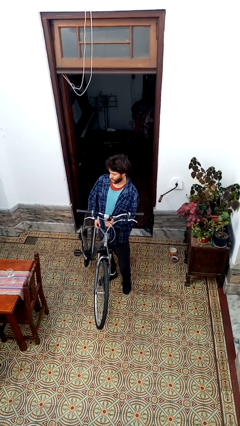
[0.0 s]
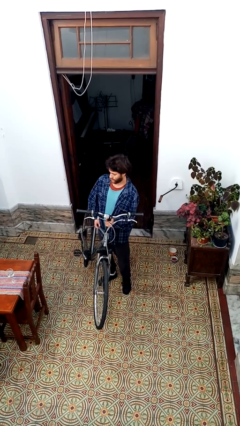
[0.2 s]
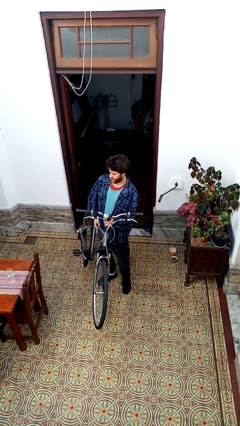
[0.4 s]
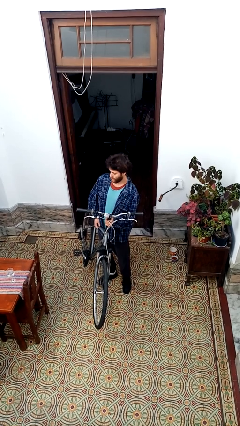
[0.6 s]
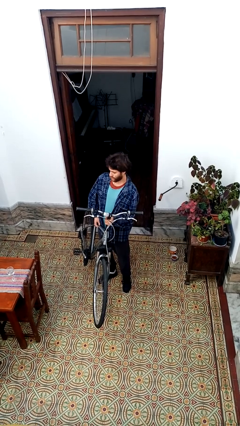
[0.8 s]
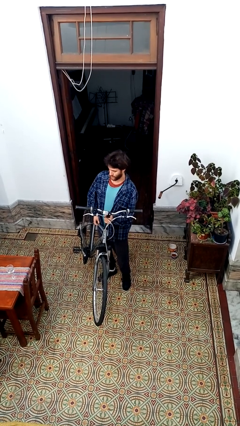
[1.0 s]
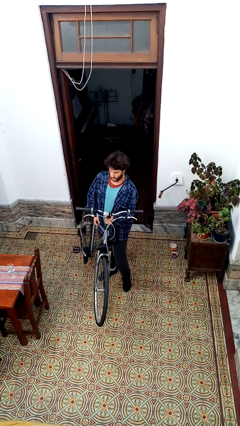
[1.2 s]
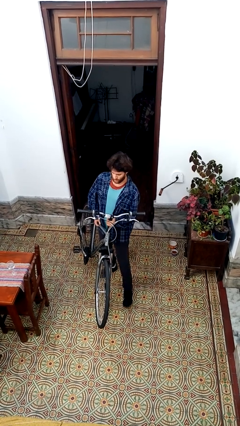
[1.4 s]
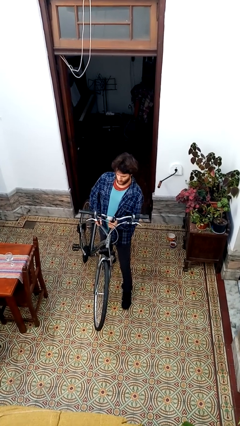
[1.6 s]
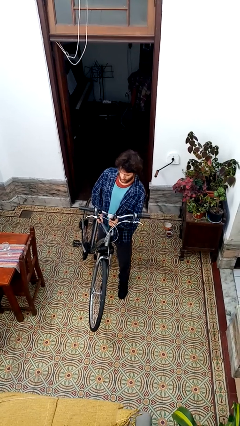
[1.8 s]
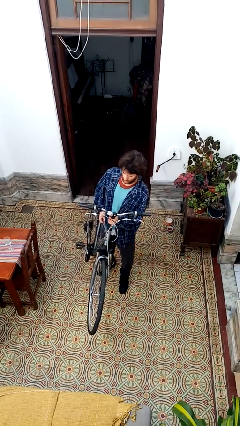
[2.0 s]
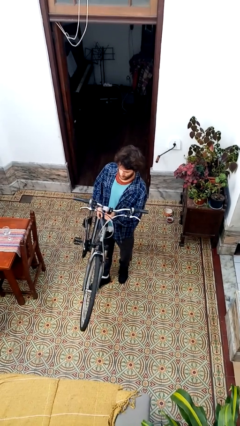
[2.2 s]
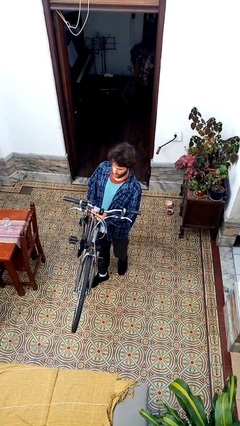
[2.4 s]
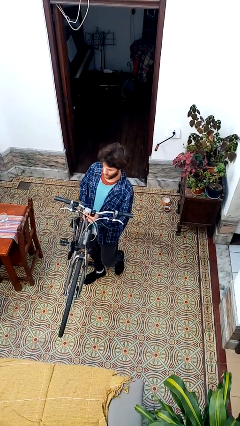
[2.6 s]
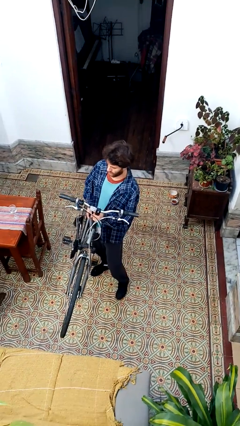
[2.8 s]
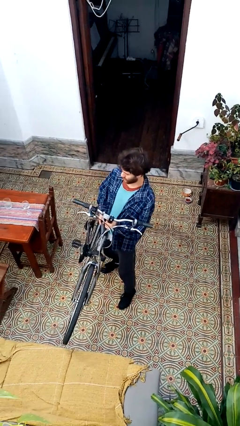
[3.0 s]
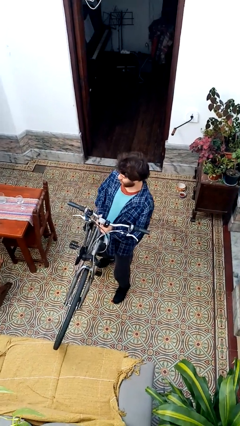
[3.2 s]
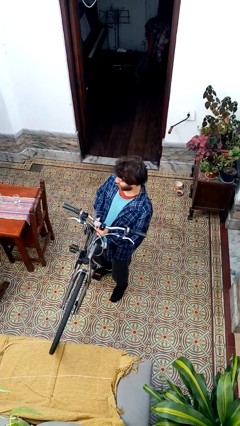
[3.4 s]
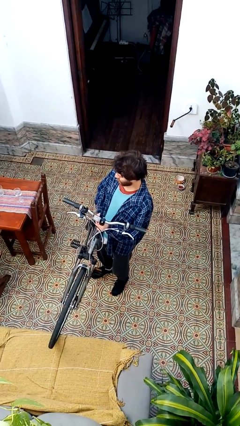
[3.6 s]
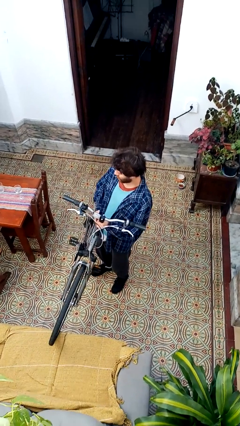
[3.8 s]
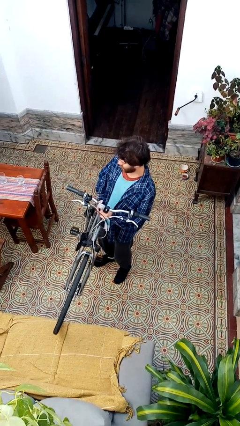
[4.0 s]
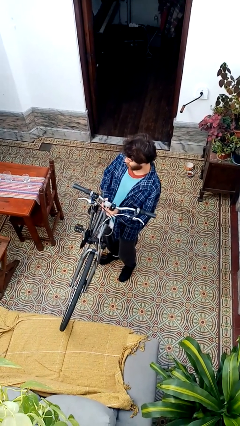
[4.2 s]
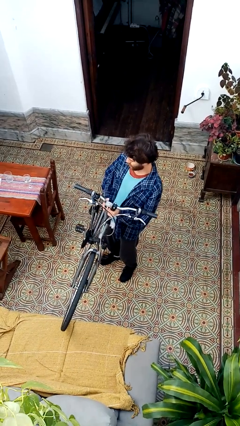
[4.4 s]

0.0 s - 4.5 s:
person carries bicycle

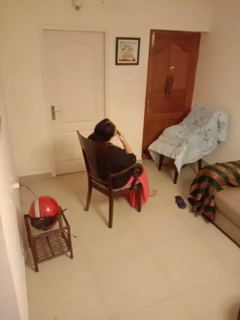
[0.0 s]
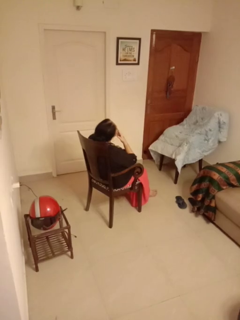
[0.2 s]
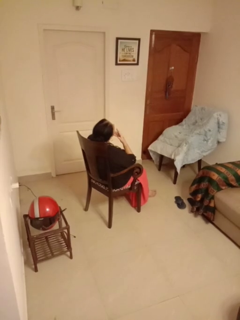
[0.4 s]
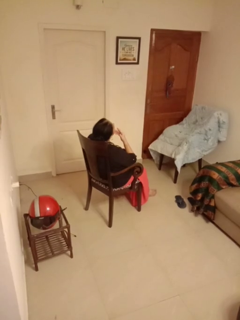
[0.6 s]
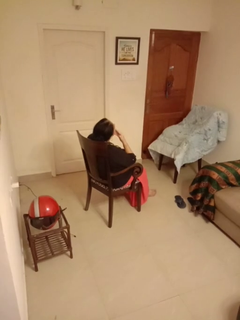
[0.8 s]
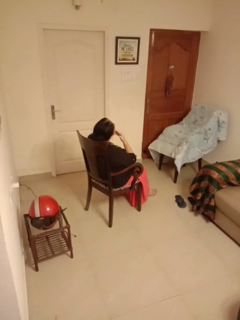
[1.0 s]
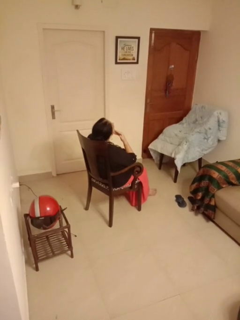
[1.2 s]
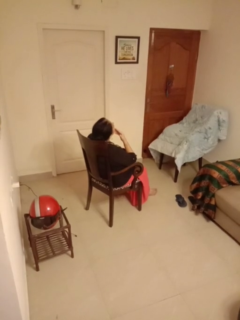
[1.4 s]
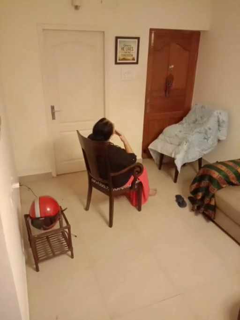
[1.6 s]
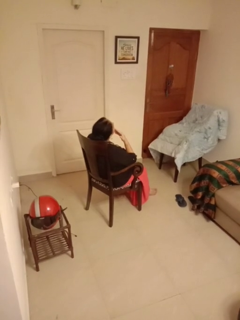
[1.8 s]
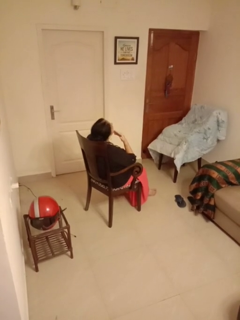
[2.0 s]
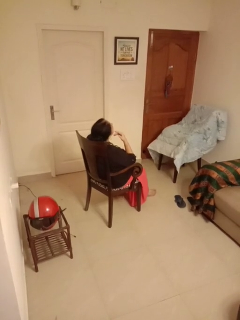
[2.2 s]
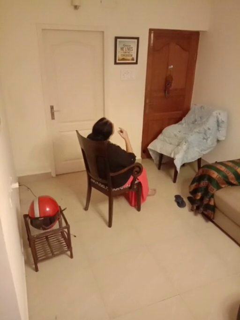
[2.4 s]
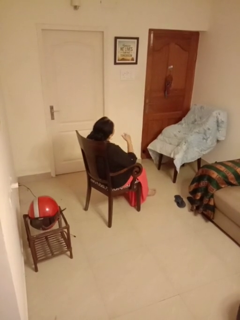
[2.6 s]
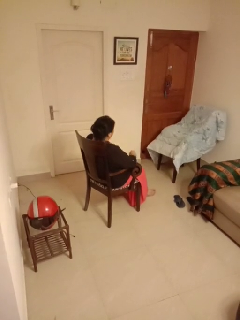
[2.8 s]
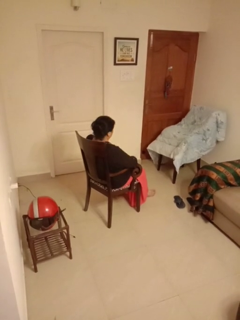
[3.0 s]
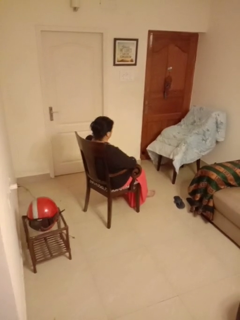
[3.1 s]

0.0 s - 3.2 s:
person strokes chin

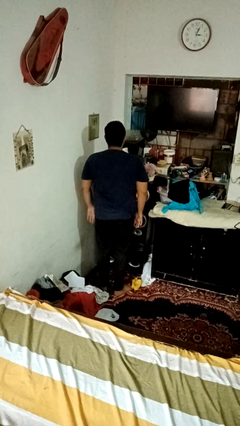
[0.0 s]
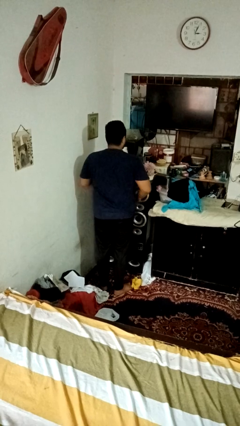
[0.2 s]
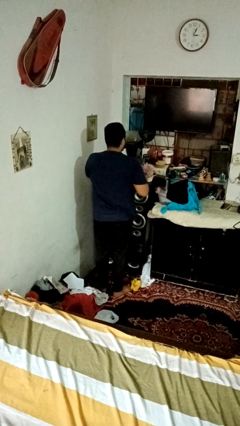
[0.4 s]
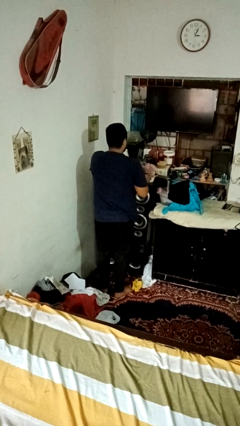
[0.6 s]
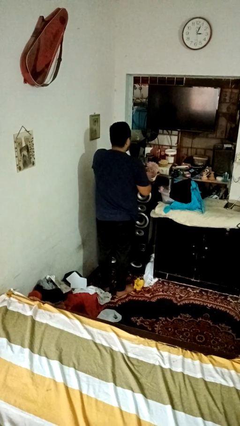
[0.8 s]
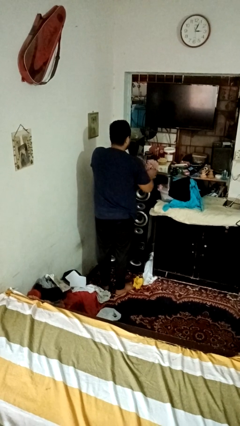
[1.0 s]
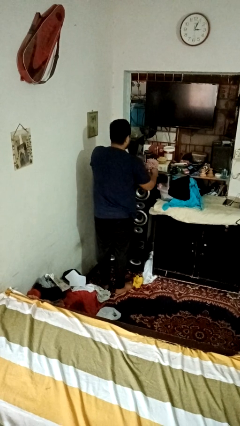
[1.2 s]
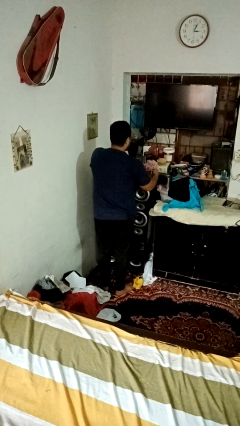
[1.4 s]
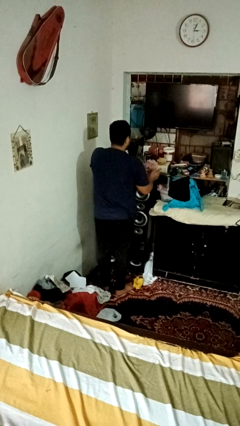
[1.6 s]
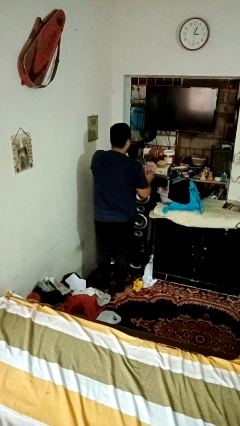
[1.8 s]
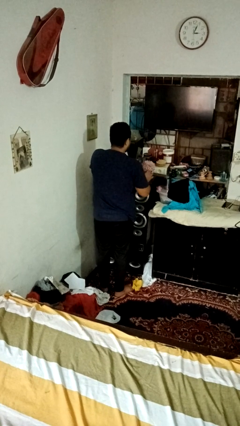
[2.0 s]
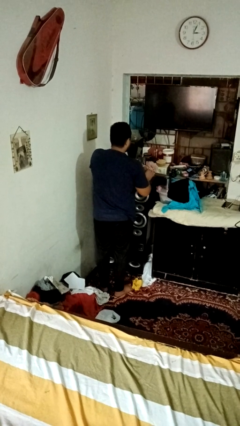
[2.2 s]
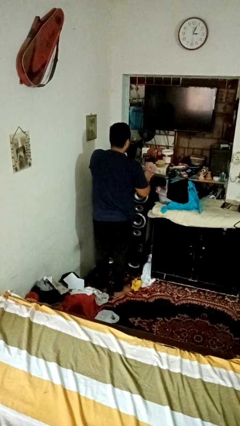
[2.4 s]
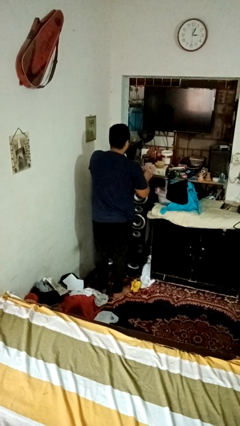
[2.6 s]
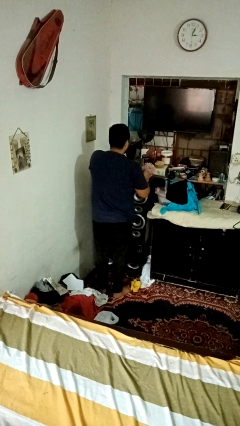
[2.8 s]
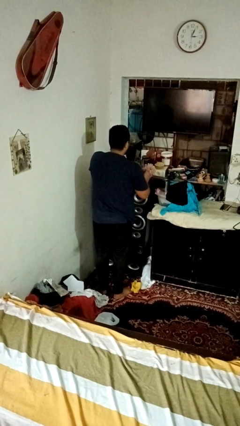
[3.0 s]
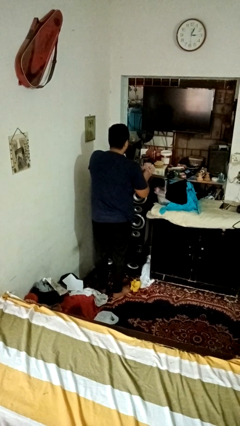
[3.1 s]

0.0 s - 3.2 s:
person arranges flowers in vase

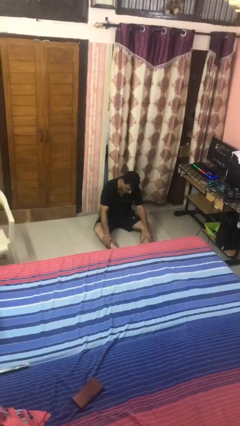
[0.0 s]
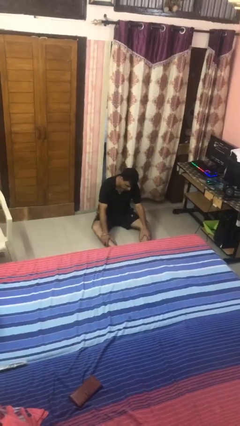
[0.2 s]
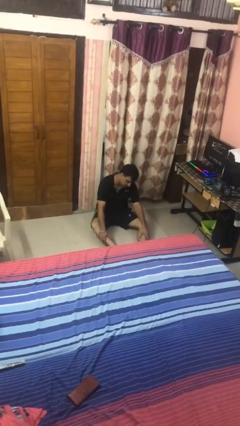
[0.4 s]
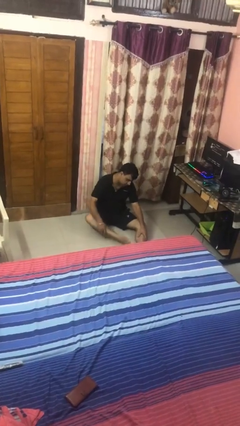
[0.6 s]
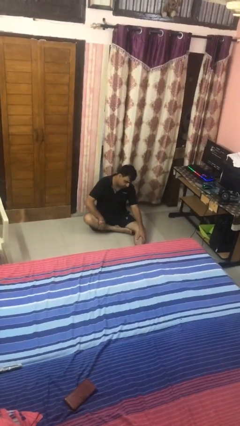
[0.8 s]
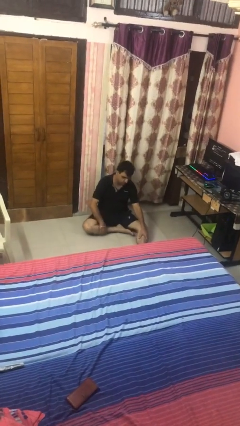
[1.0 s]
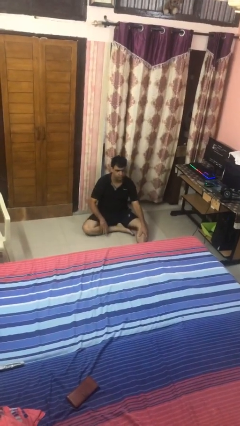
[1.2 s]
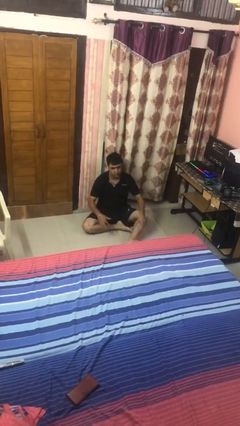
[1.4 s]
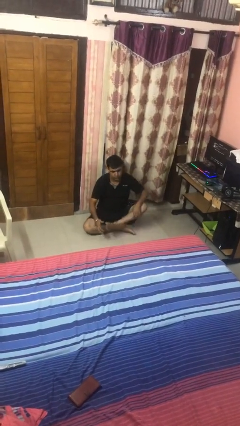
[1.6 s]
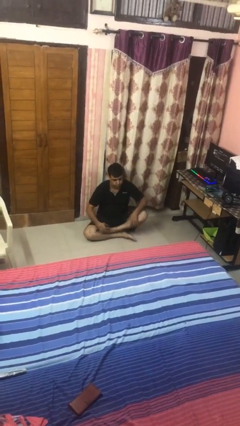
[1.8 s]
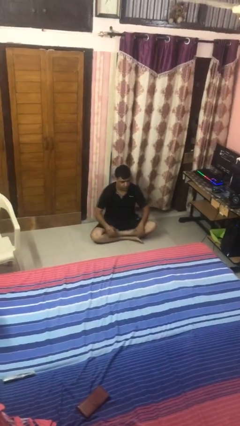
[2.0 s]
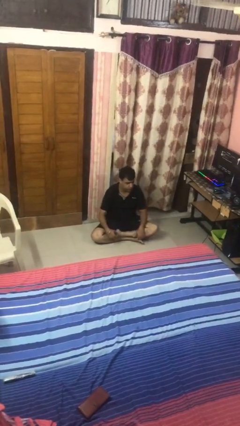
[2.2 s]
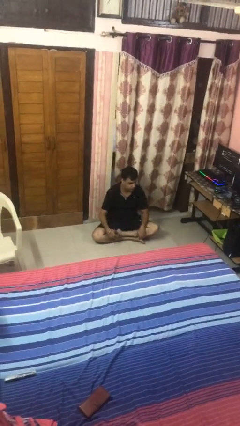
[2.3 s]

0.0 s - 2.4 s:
person crosses legs

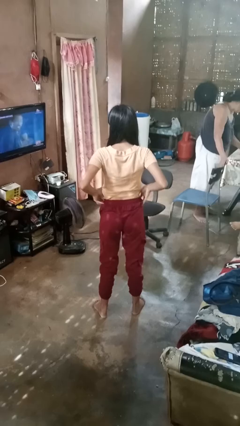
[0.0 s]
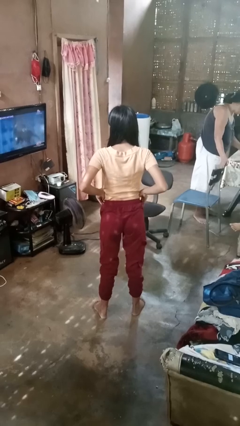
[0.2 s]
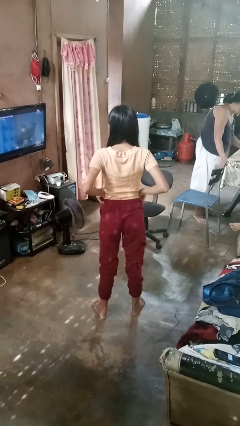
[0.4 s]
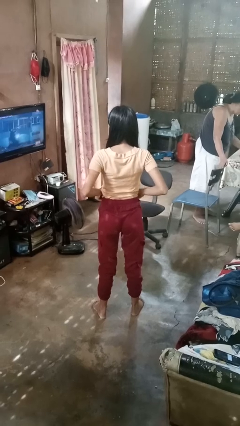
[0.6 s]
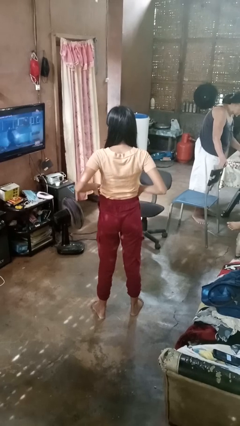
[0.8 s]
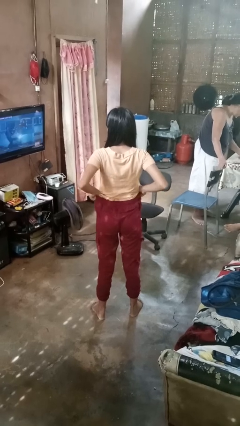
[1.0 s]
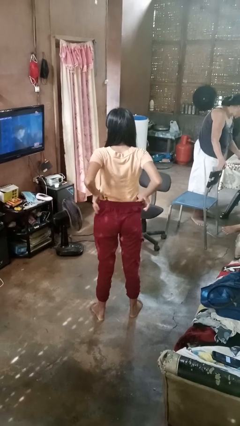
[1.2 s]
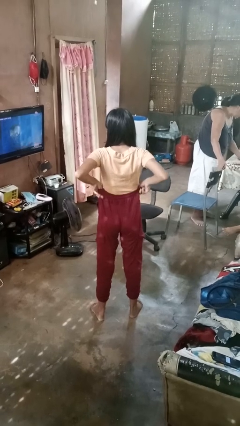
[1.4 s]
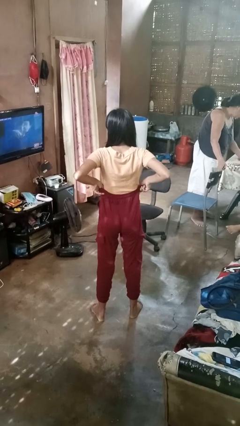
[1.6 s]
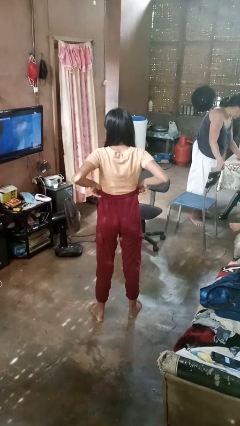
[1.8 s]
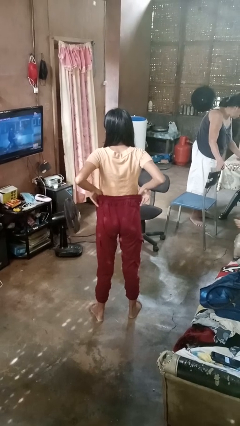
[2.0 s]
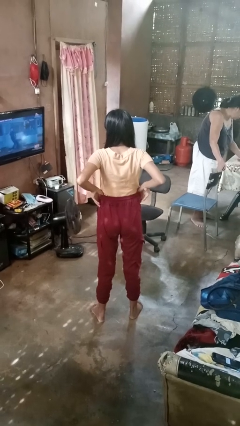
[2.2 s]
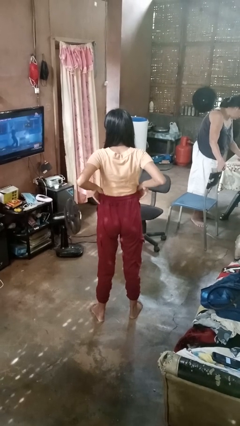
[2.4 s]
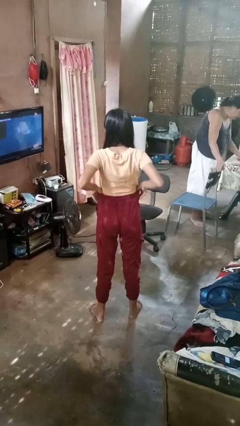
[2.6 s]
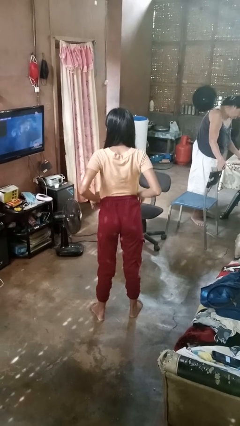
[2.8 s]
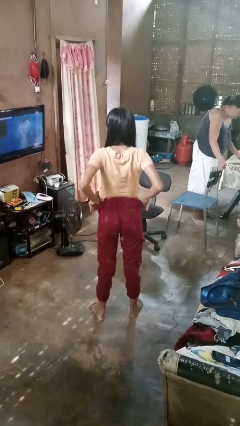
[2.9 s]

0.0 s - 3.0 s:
person hikes up pants

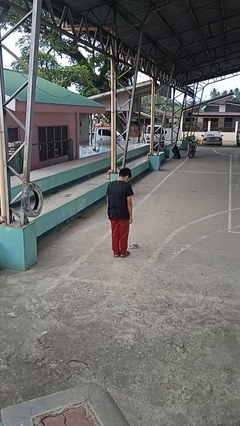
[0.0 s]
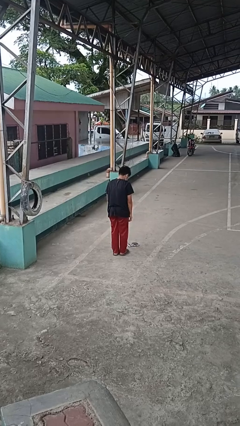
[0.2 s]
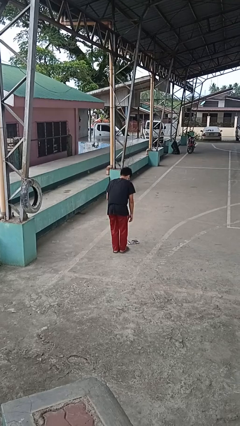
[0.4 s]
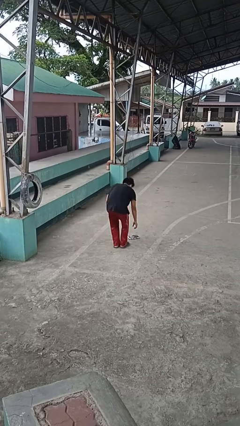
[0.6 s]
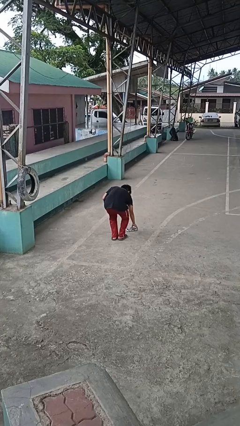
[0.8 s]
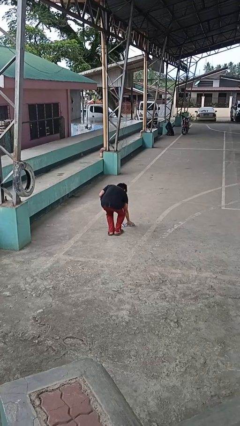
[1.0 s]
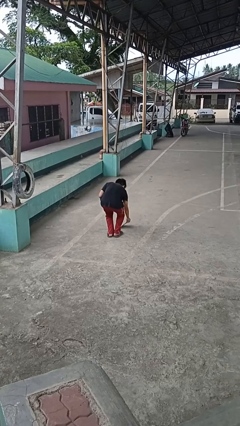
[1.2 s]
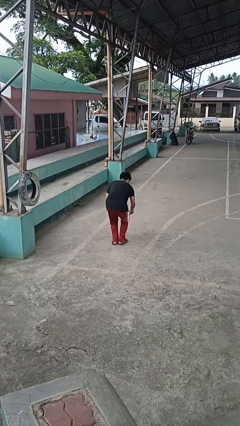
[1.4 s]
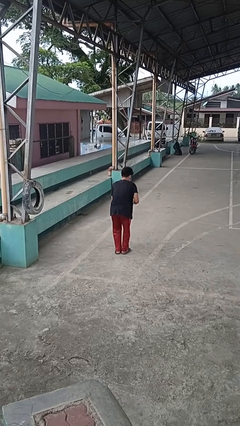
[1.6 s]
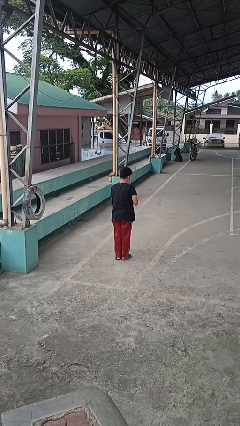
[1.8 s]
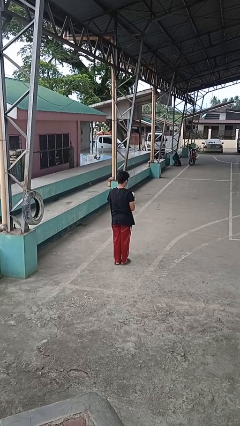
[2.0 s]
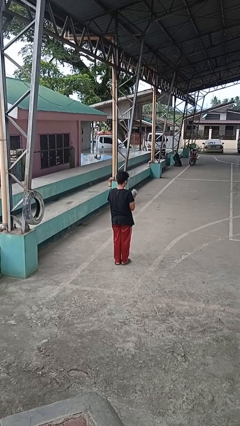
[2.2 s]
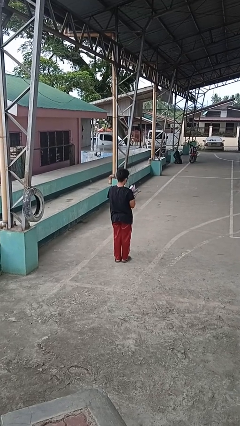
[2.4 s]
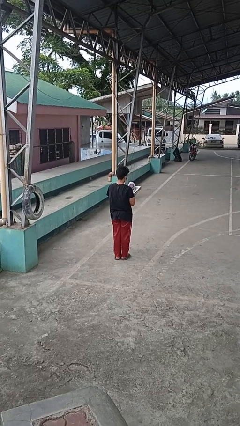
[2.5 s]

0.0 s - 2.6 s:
person picks up object from floor
